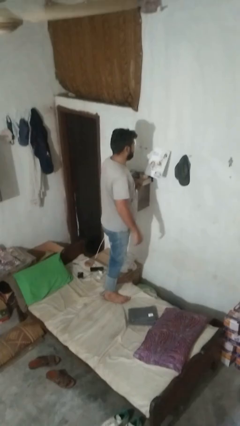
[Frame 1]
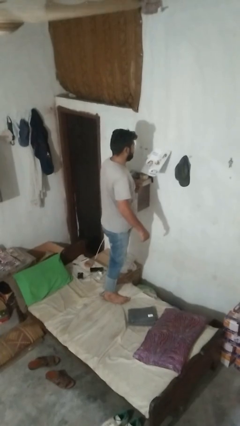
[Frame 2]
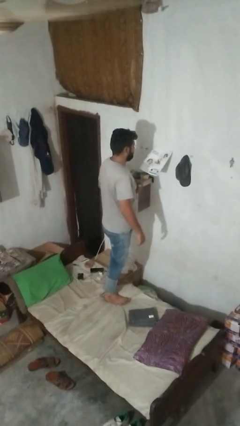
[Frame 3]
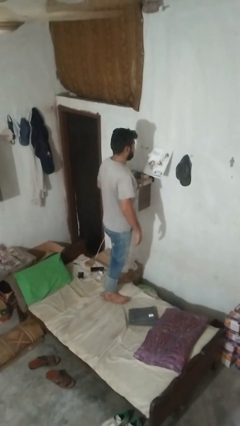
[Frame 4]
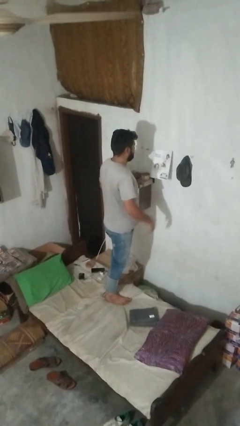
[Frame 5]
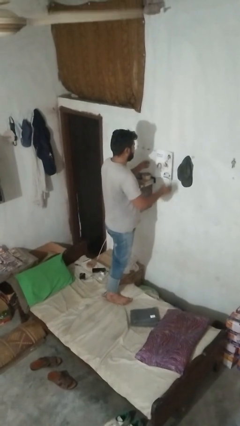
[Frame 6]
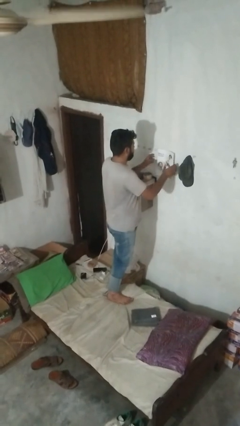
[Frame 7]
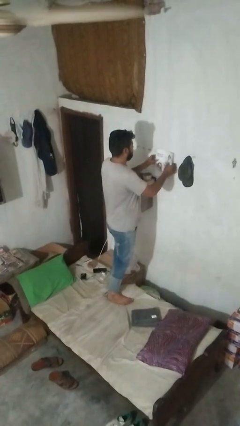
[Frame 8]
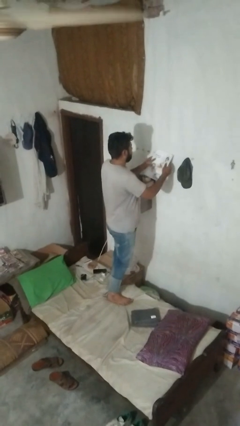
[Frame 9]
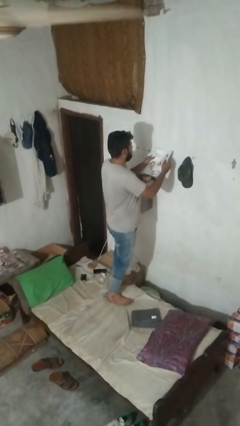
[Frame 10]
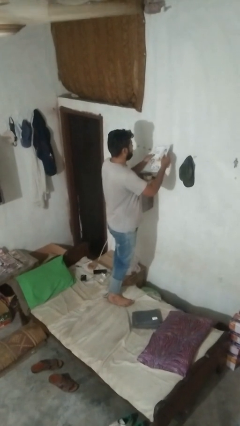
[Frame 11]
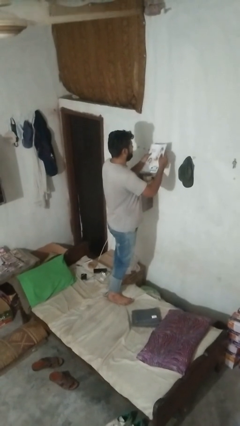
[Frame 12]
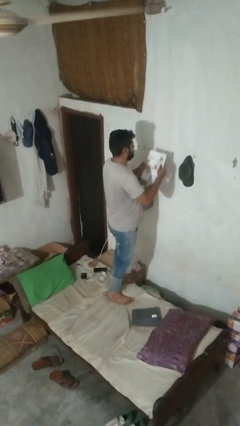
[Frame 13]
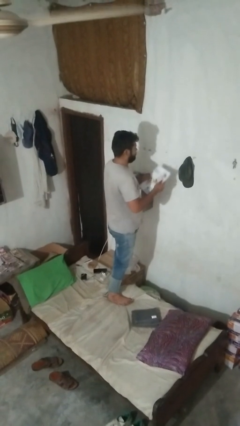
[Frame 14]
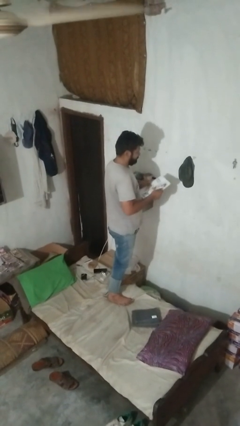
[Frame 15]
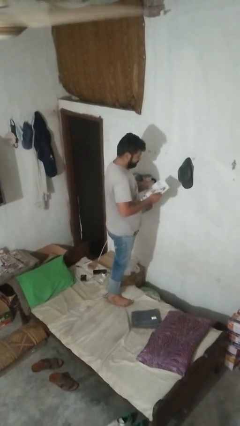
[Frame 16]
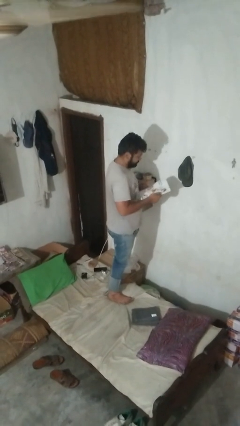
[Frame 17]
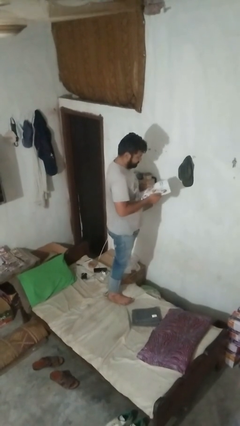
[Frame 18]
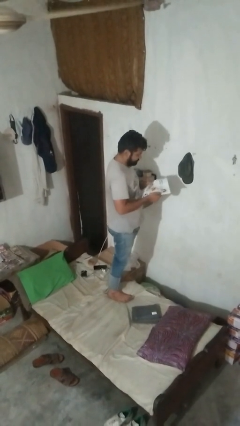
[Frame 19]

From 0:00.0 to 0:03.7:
person takes down picture frame

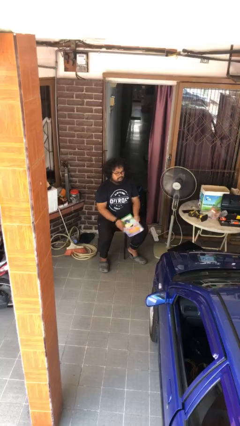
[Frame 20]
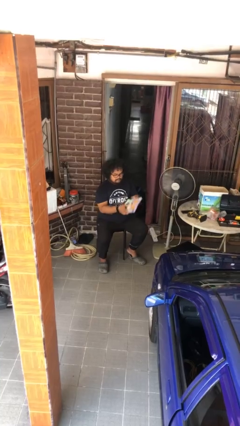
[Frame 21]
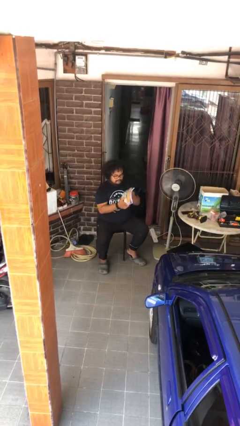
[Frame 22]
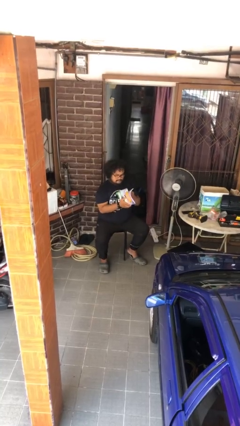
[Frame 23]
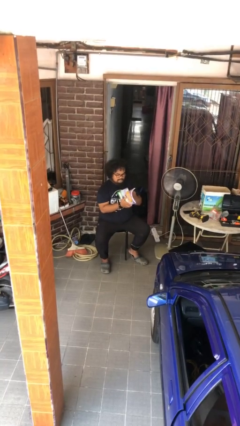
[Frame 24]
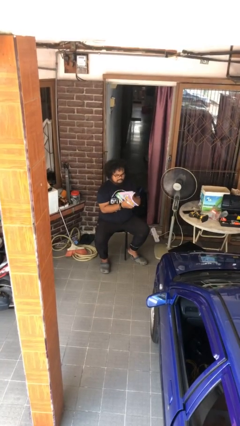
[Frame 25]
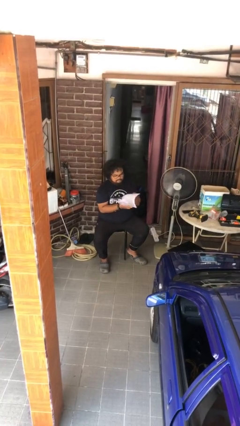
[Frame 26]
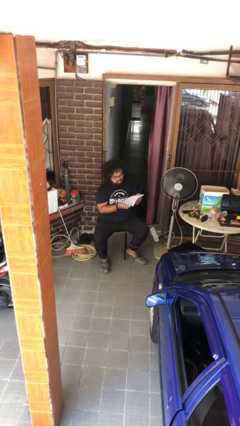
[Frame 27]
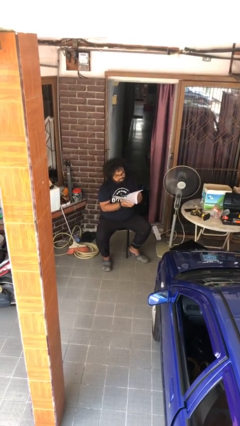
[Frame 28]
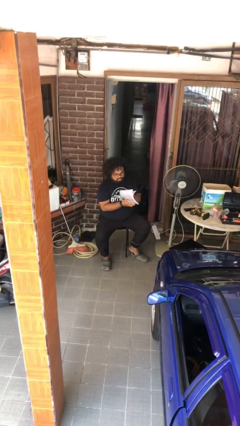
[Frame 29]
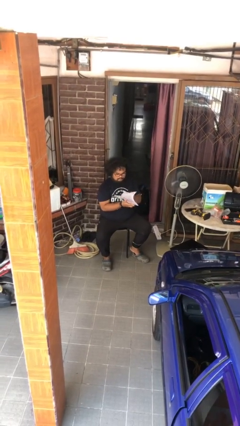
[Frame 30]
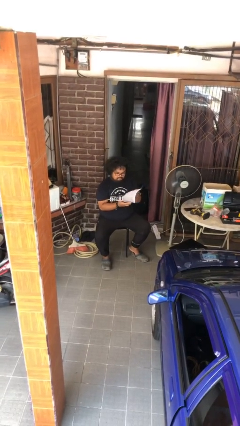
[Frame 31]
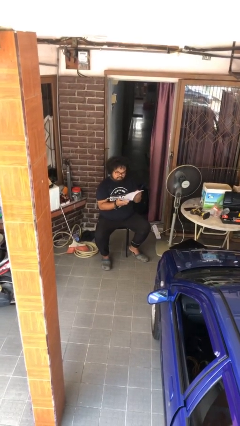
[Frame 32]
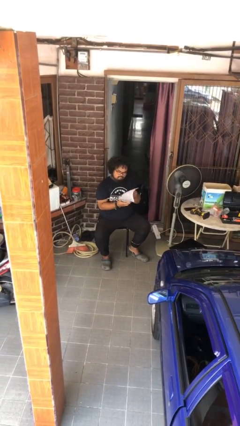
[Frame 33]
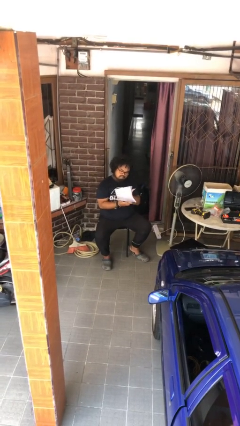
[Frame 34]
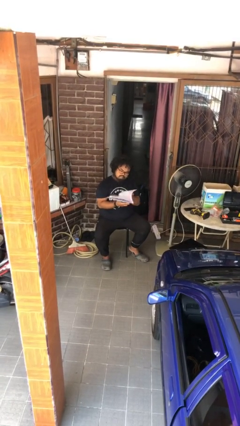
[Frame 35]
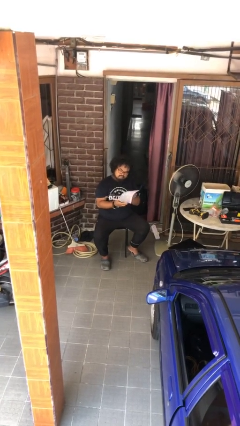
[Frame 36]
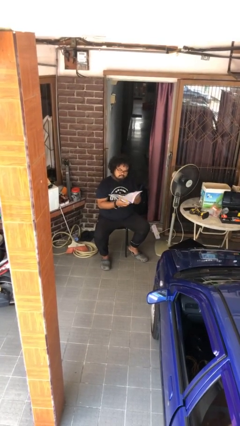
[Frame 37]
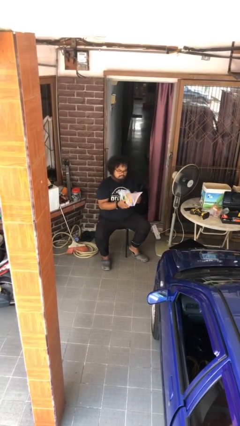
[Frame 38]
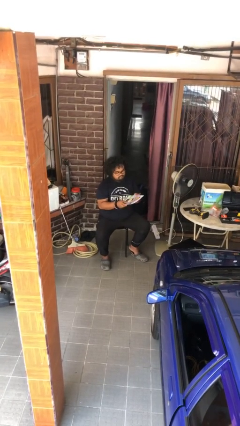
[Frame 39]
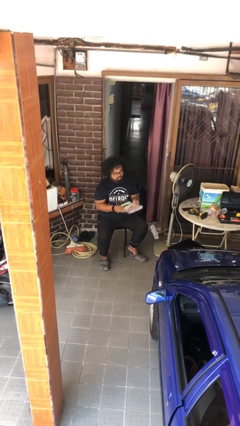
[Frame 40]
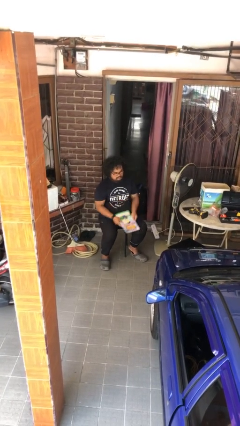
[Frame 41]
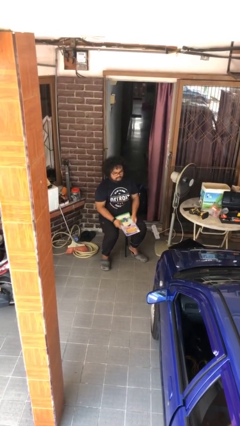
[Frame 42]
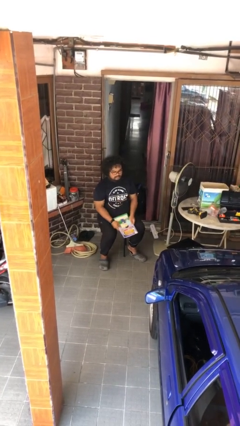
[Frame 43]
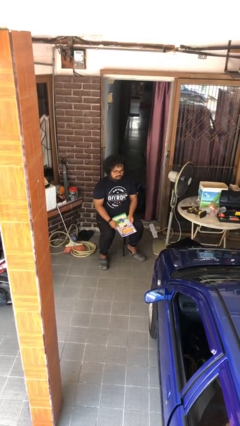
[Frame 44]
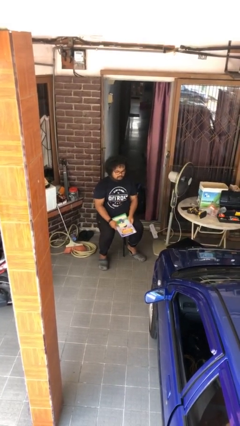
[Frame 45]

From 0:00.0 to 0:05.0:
person reads document

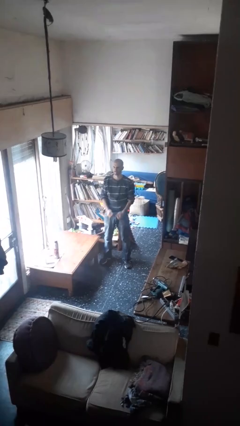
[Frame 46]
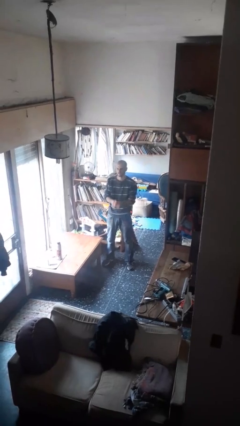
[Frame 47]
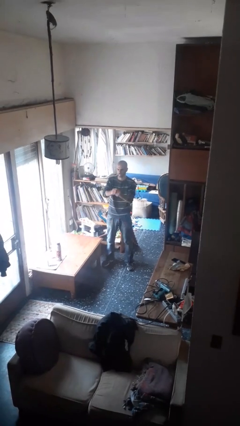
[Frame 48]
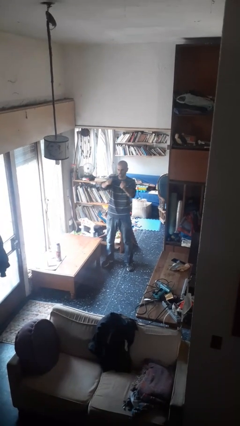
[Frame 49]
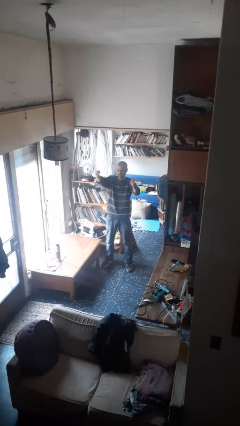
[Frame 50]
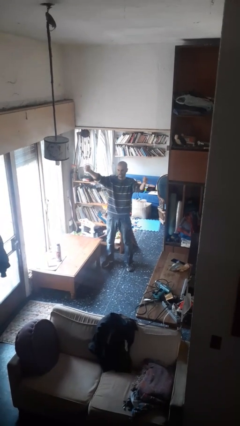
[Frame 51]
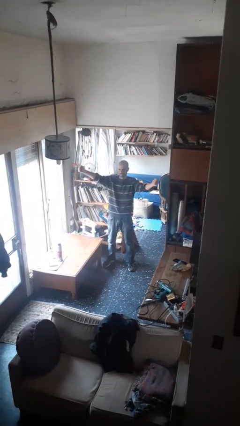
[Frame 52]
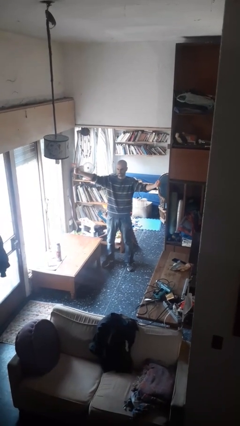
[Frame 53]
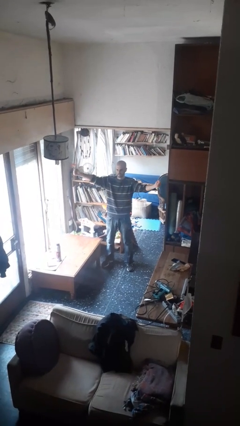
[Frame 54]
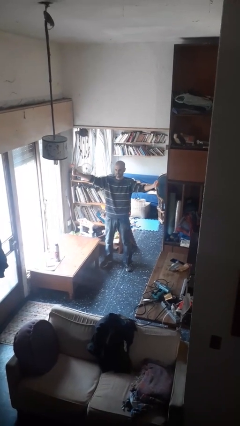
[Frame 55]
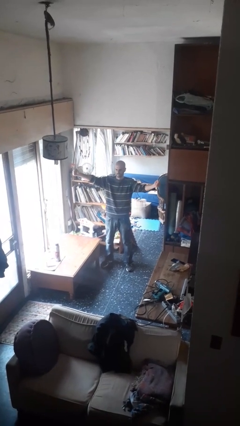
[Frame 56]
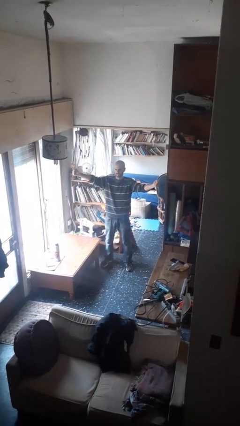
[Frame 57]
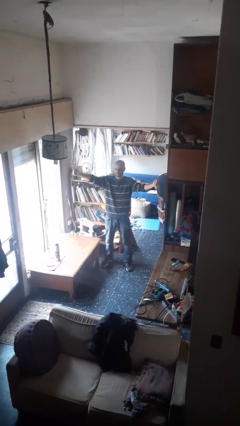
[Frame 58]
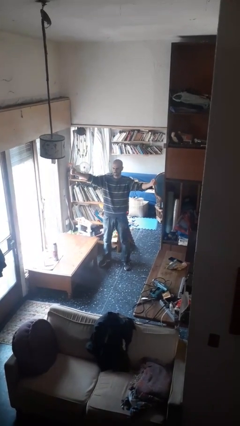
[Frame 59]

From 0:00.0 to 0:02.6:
person gestures zoom in

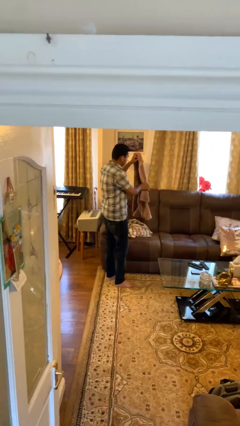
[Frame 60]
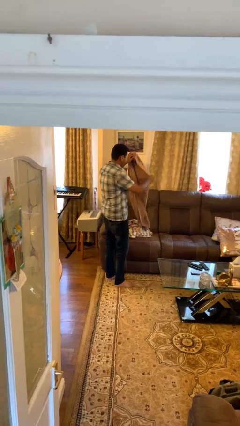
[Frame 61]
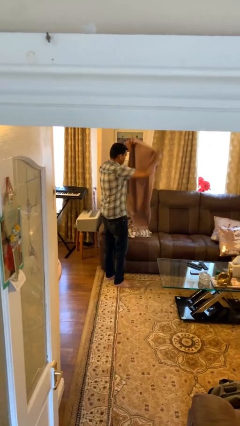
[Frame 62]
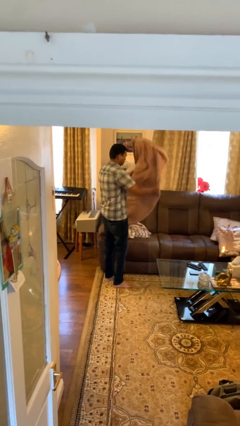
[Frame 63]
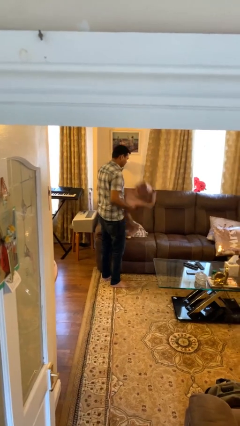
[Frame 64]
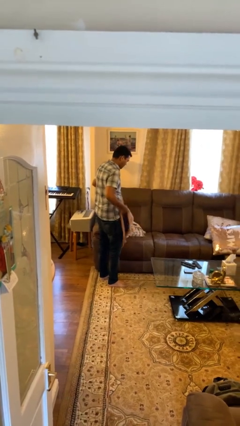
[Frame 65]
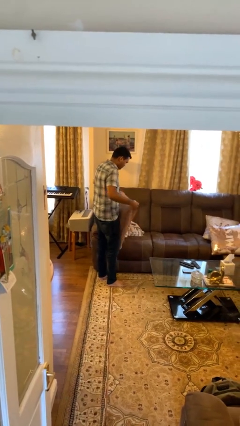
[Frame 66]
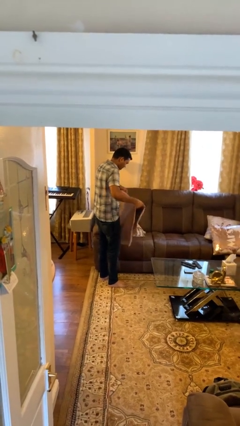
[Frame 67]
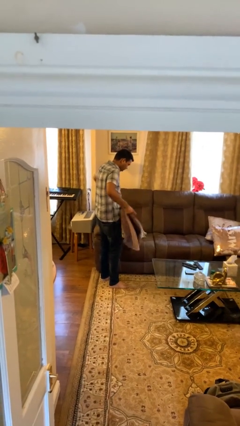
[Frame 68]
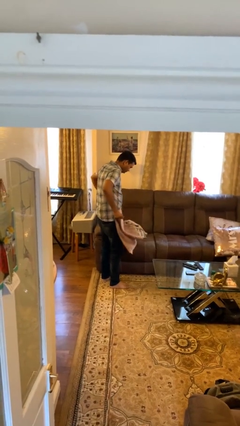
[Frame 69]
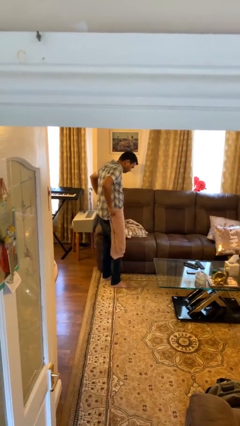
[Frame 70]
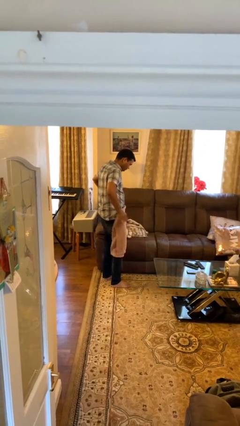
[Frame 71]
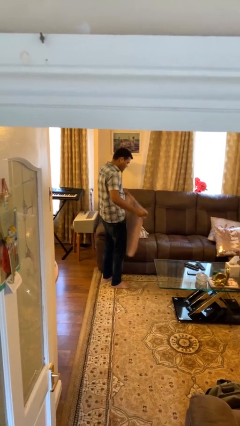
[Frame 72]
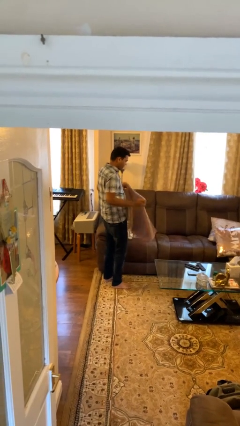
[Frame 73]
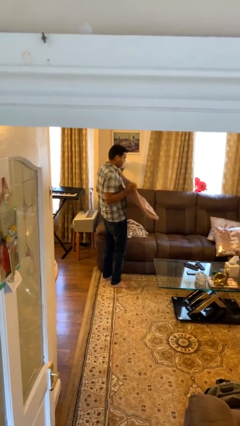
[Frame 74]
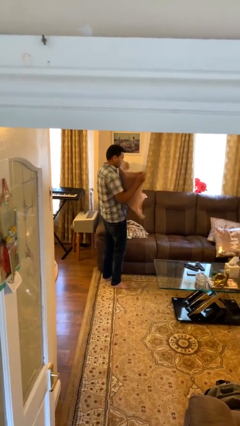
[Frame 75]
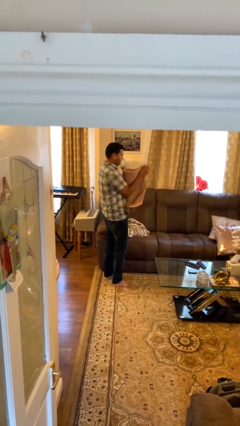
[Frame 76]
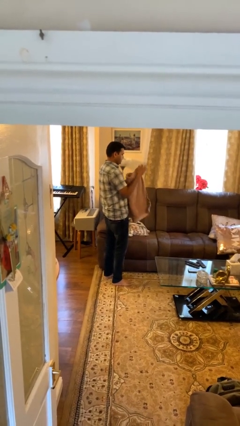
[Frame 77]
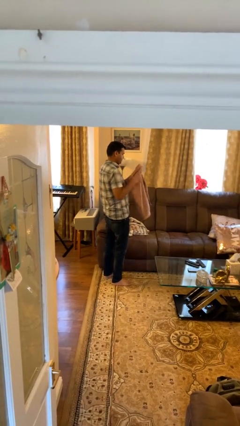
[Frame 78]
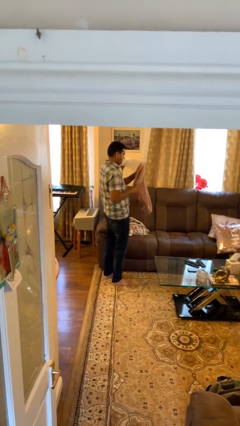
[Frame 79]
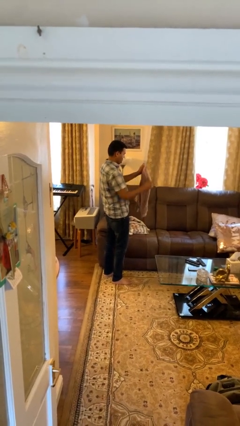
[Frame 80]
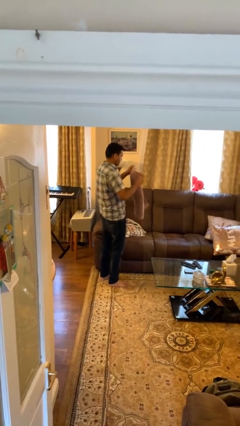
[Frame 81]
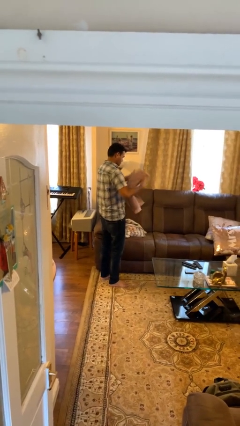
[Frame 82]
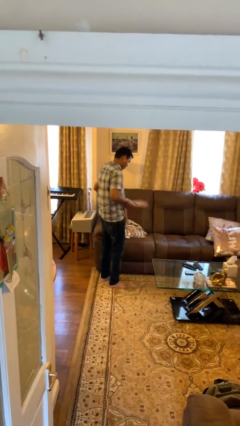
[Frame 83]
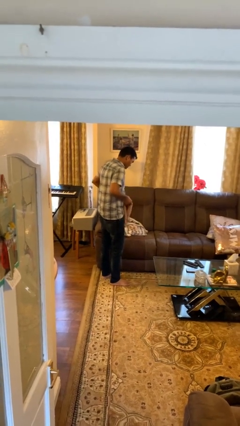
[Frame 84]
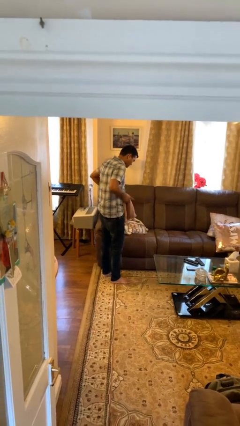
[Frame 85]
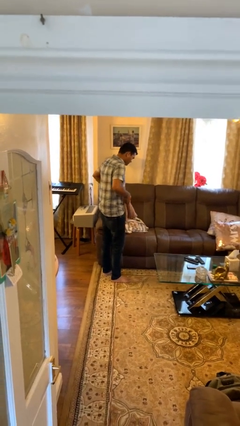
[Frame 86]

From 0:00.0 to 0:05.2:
person folds towel

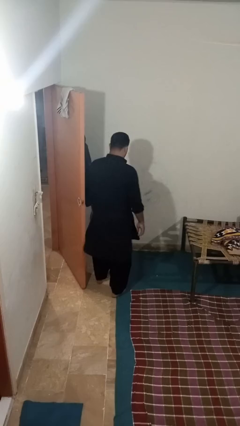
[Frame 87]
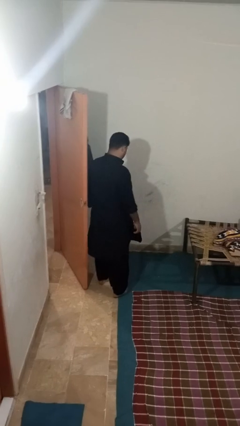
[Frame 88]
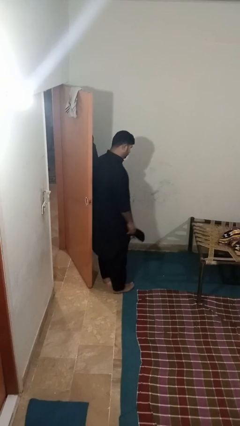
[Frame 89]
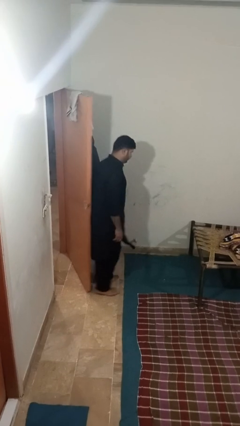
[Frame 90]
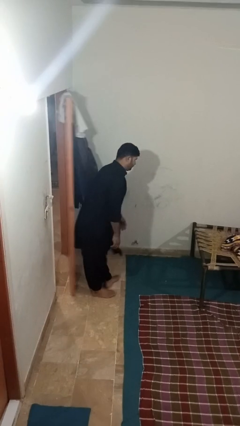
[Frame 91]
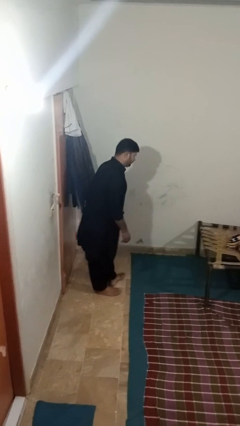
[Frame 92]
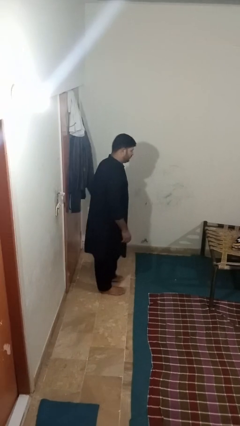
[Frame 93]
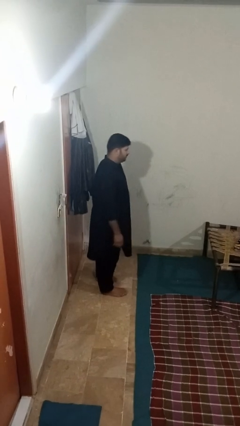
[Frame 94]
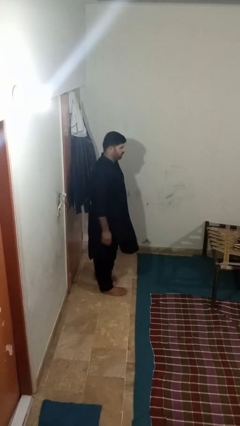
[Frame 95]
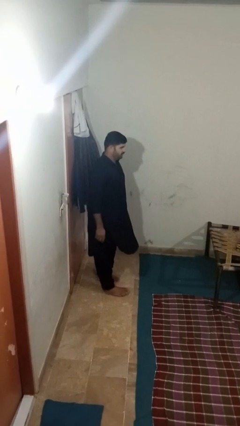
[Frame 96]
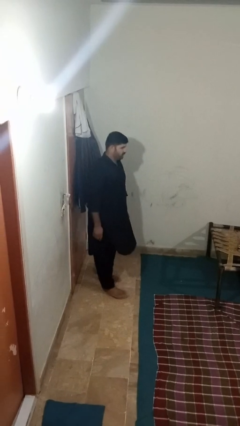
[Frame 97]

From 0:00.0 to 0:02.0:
person closes door with hip
